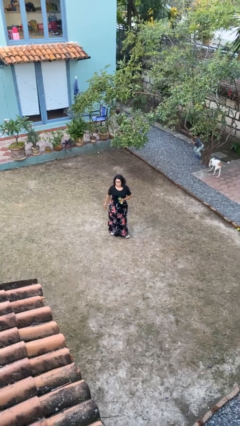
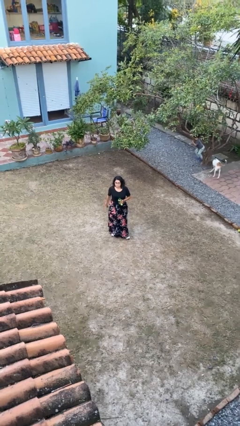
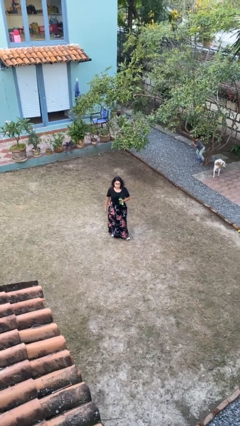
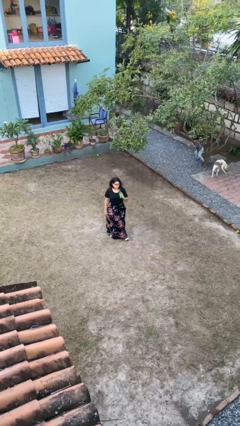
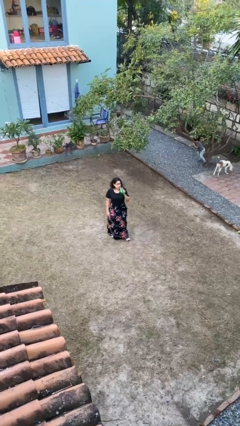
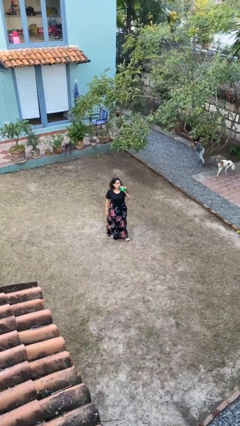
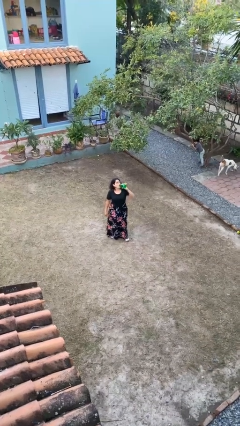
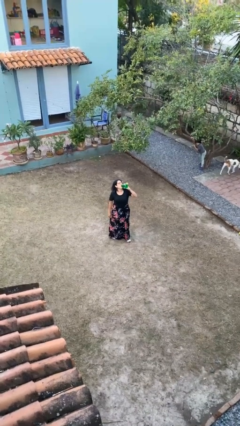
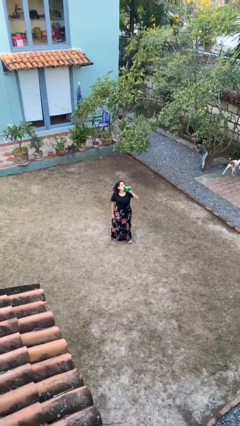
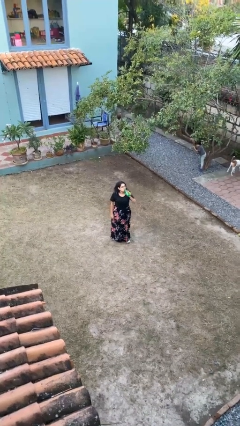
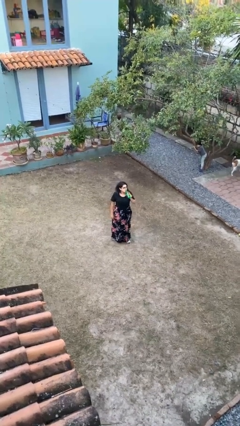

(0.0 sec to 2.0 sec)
person drinks from bottle

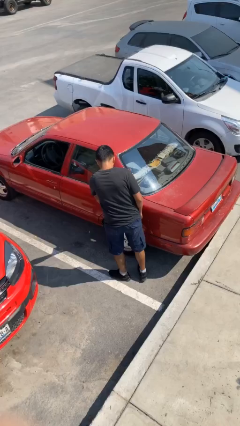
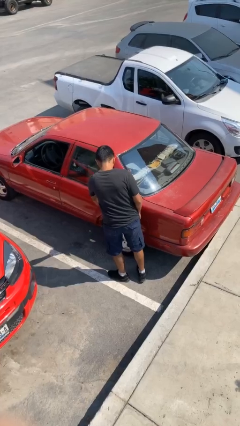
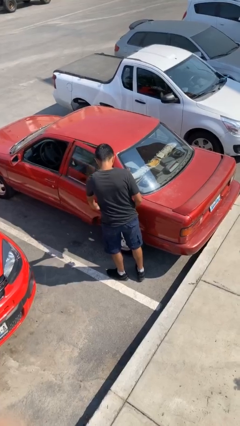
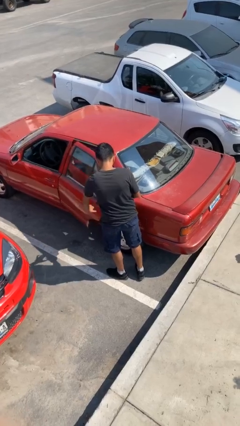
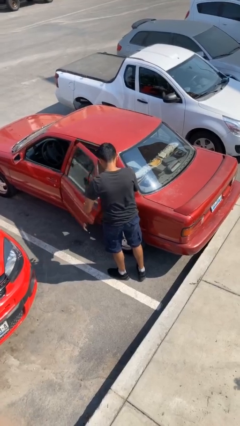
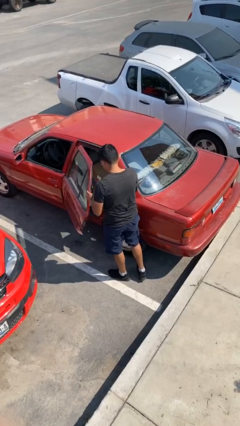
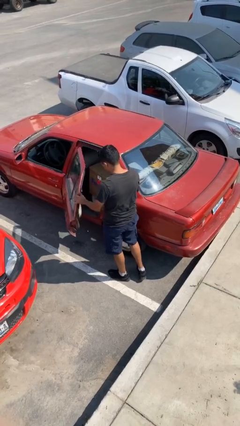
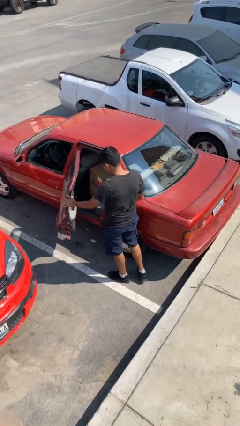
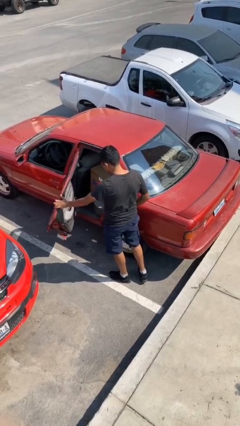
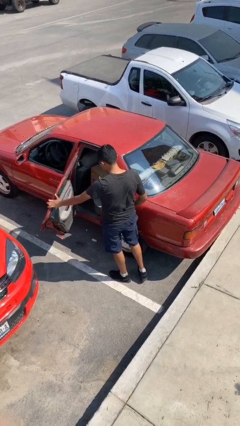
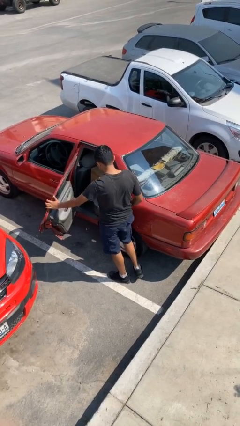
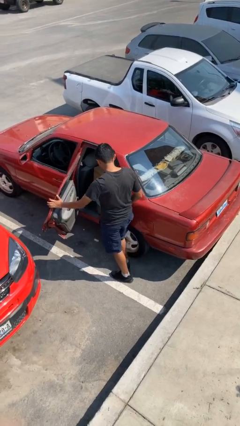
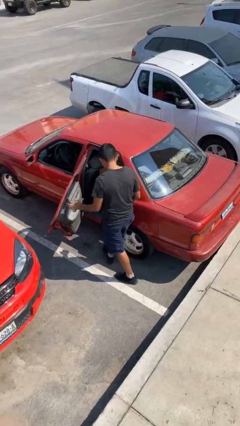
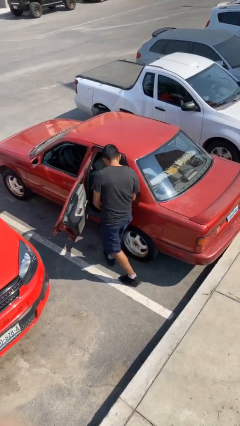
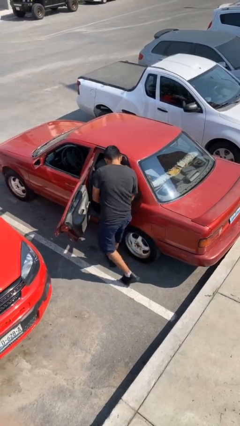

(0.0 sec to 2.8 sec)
person opens car door

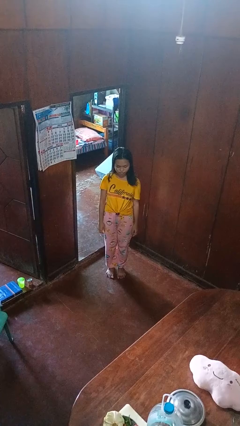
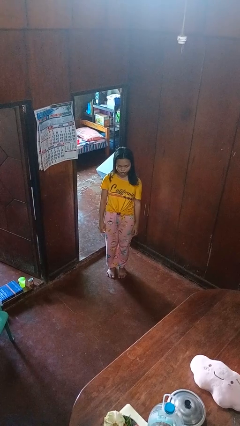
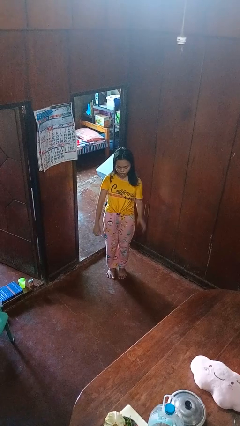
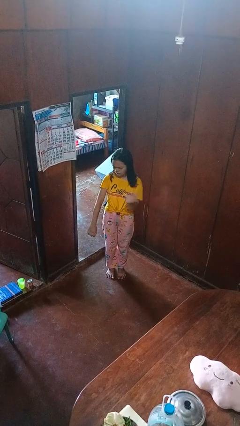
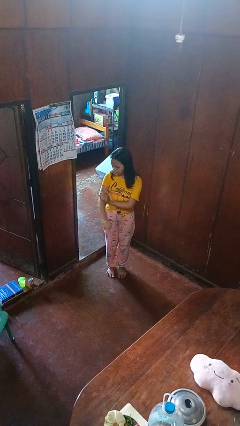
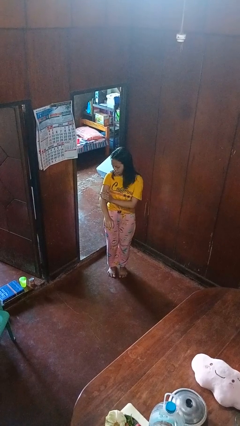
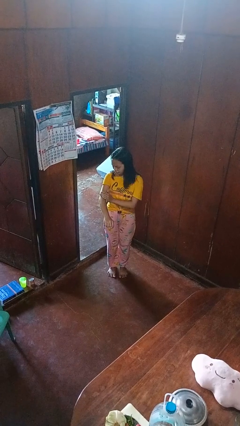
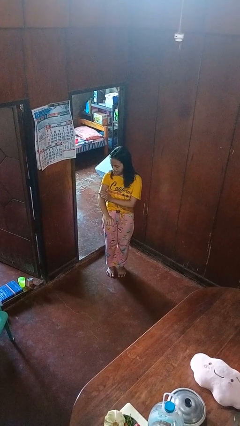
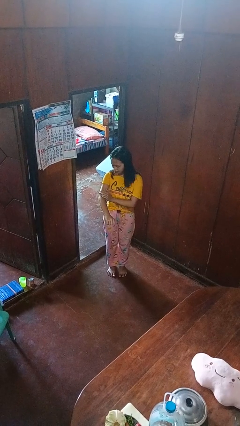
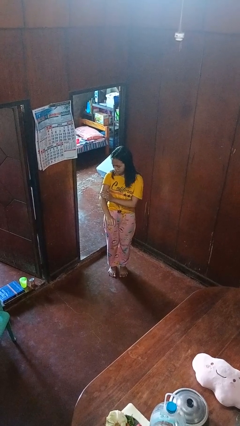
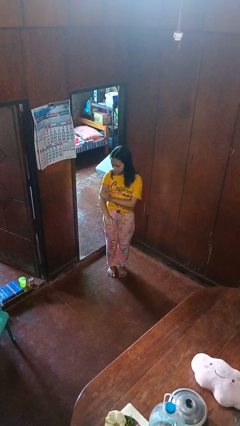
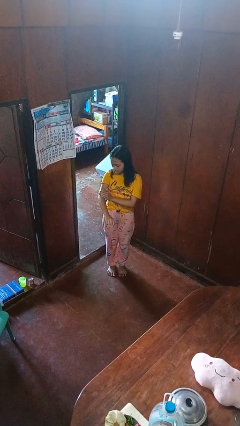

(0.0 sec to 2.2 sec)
person swats bug

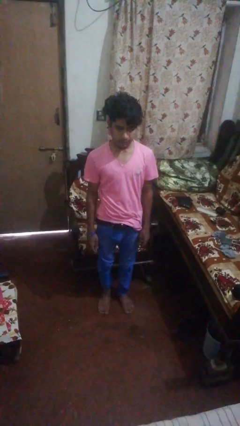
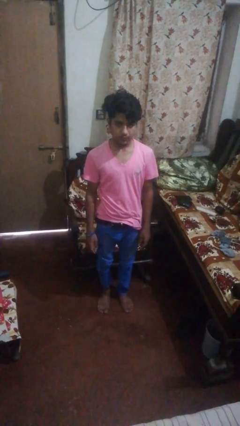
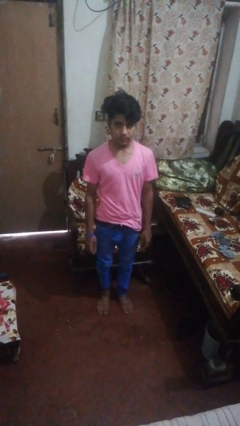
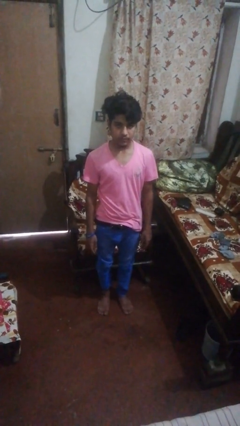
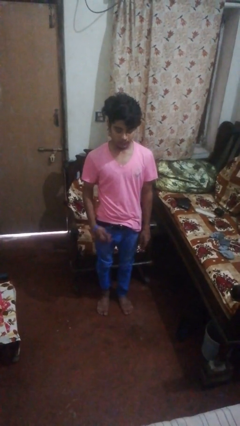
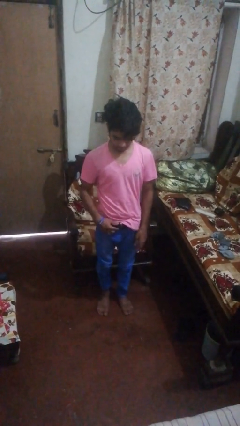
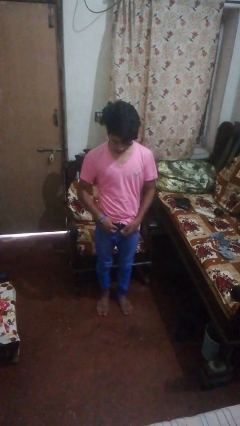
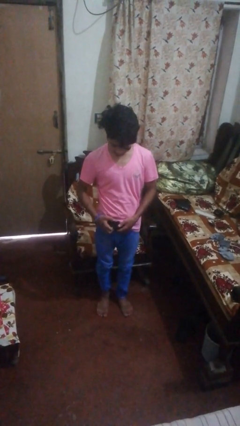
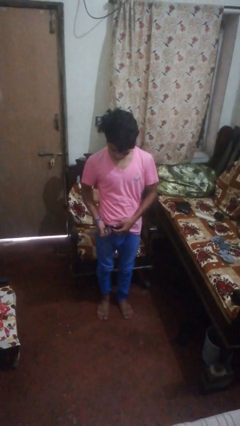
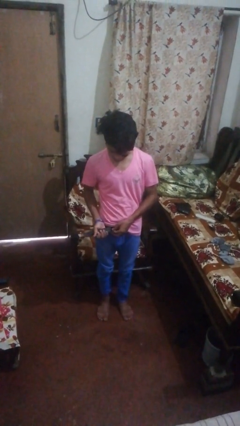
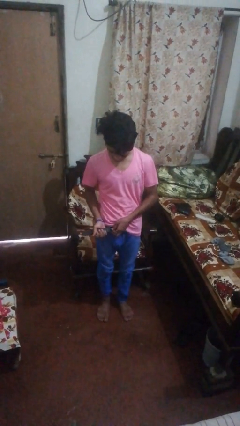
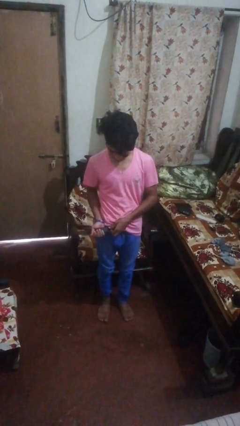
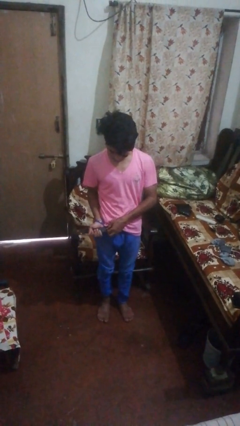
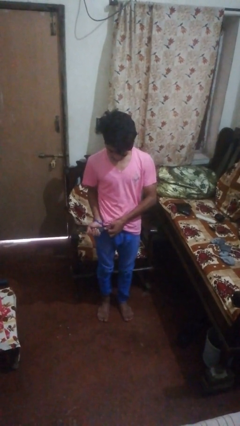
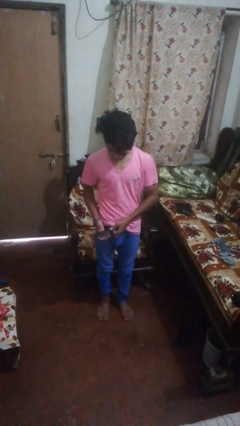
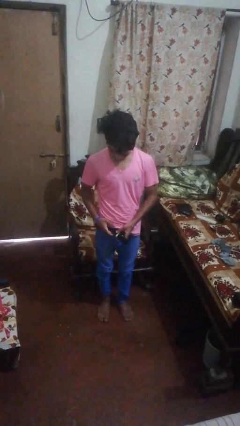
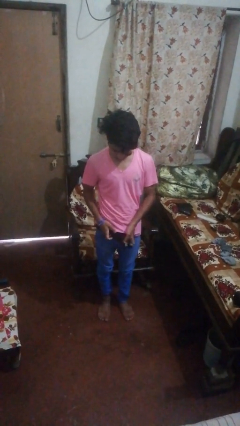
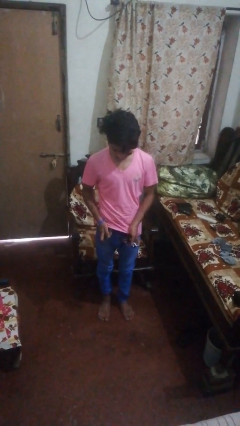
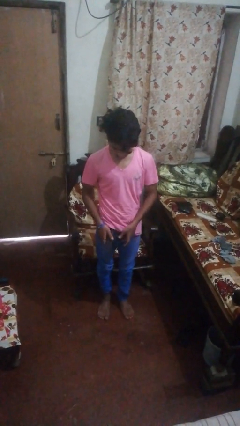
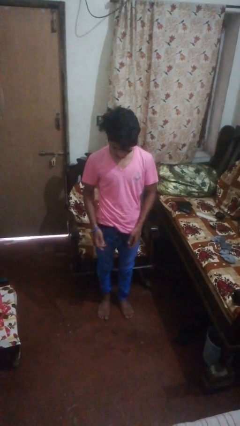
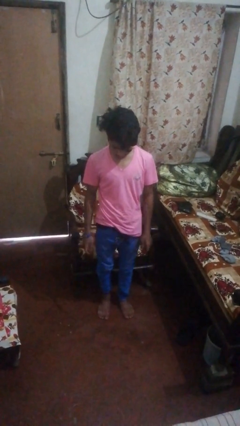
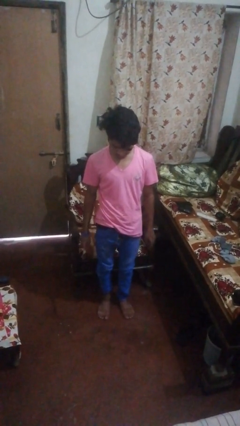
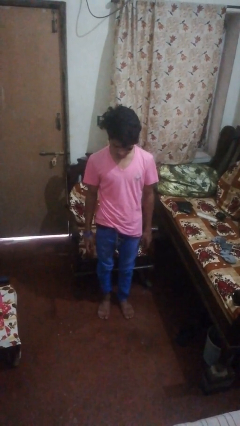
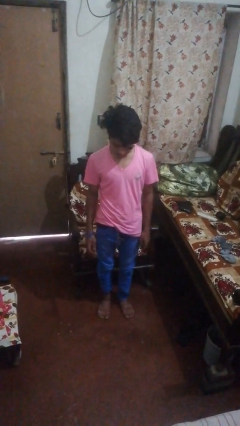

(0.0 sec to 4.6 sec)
person takes off belt

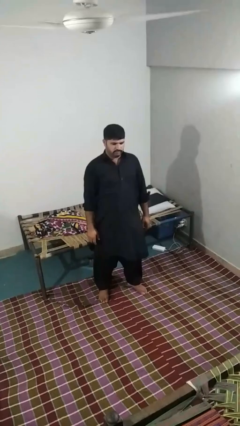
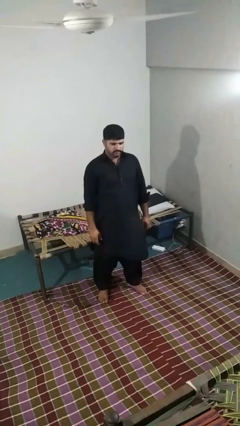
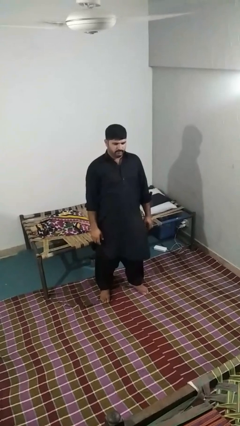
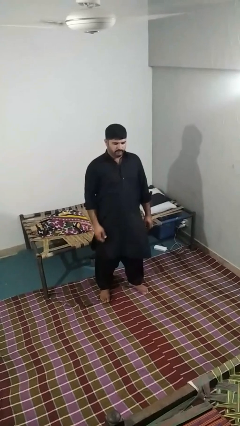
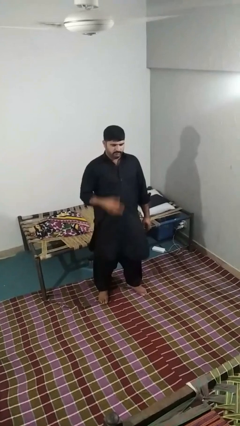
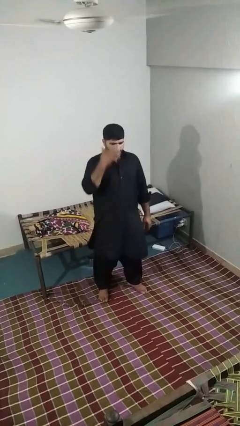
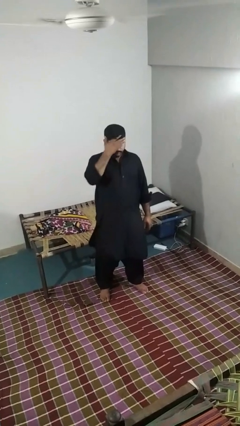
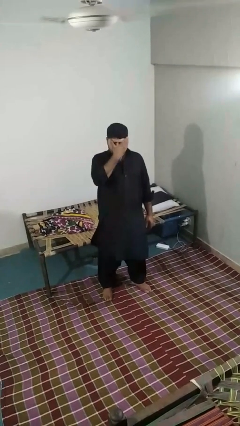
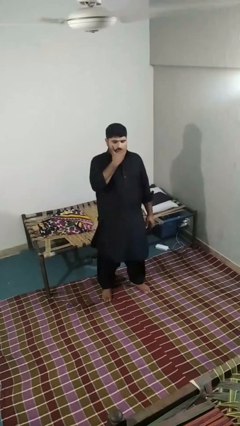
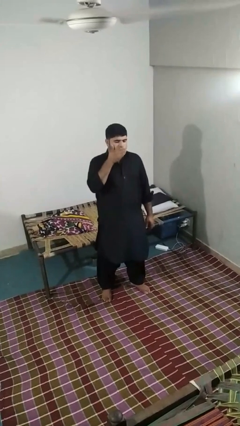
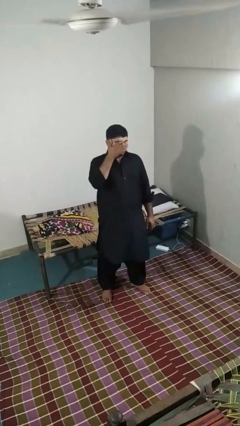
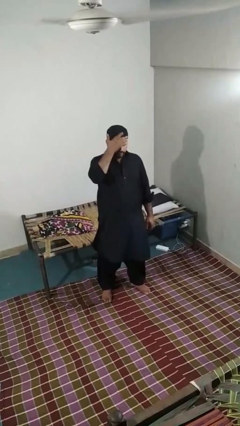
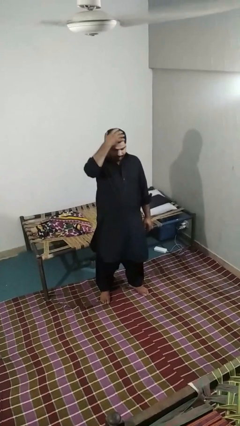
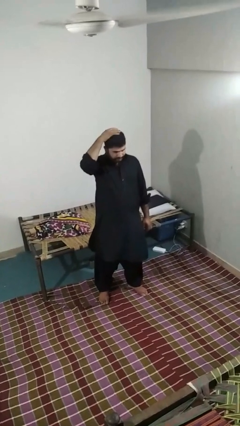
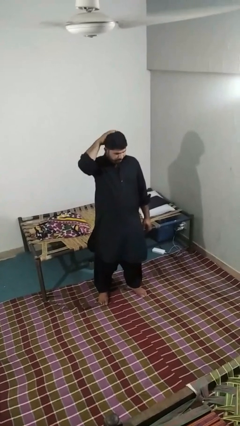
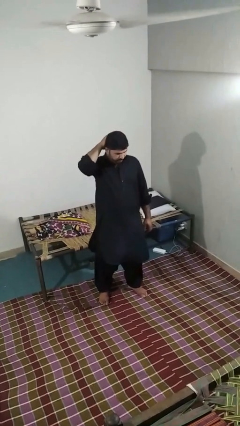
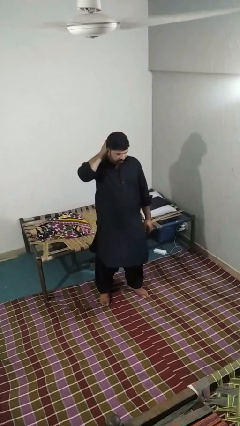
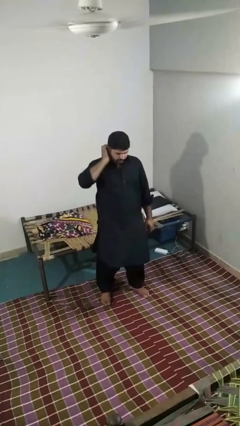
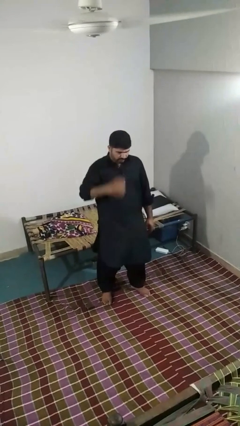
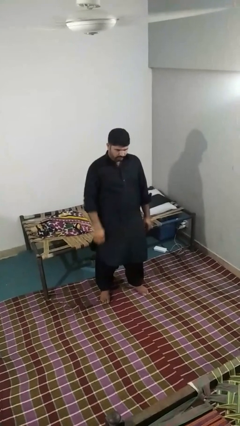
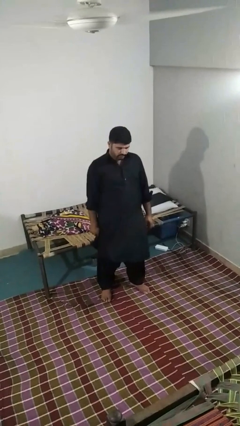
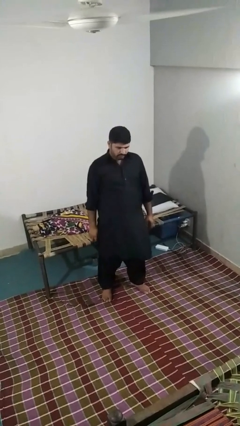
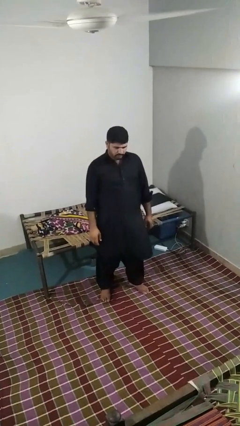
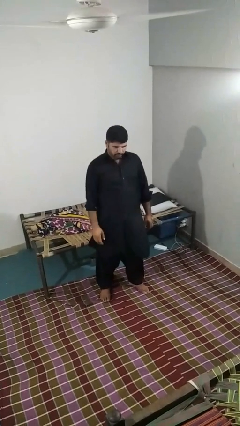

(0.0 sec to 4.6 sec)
person scratches face

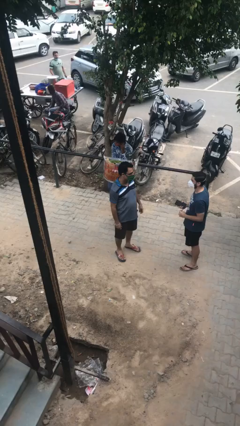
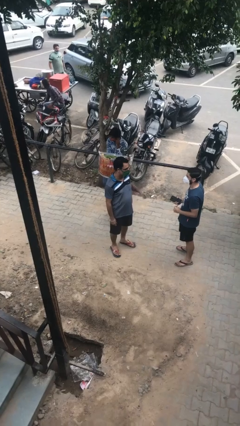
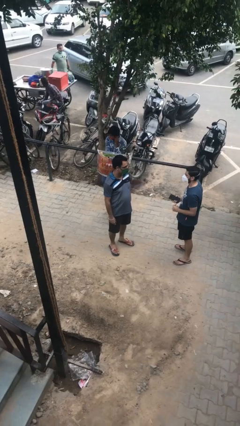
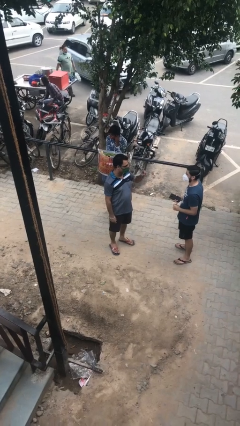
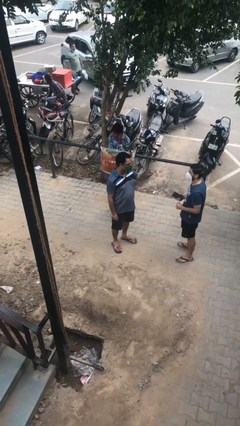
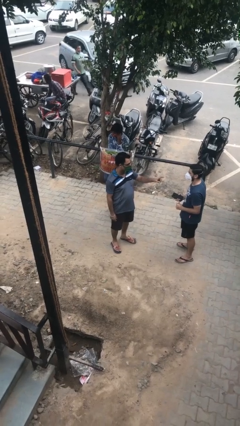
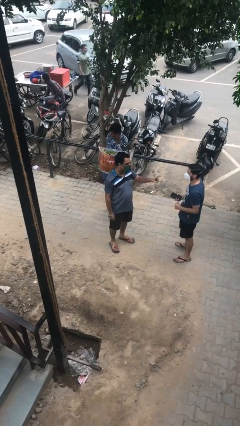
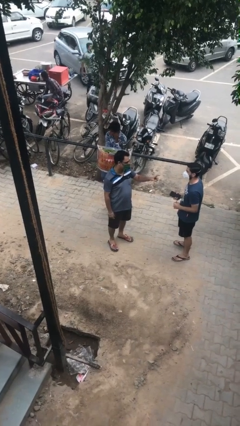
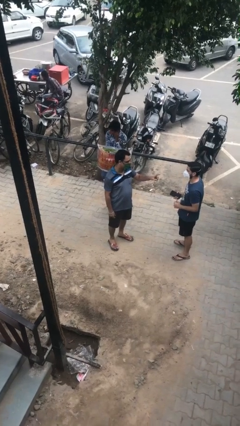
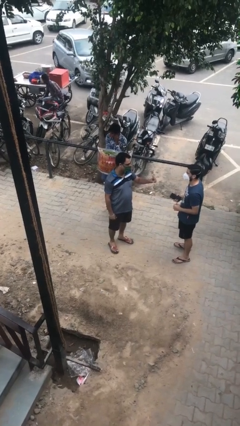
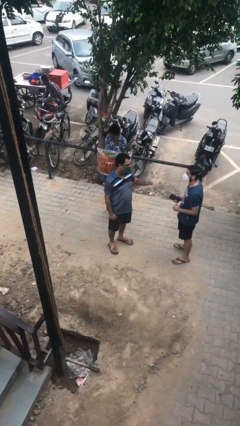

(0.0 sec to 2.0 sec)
person points at person
